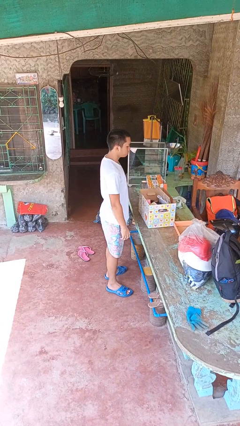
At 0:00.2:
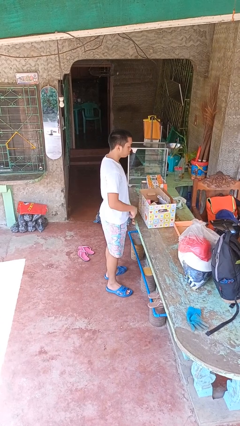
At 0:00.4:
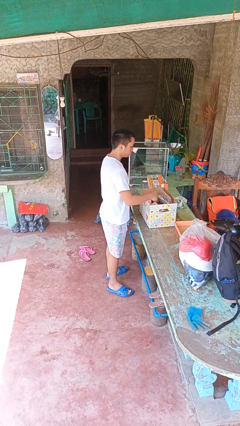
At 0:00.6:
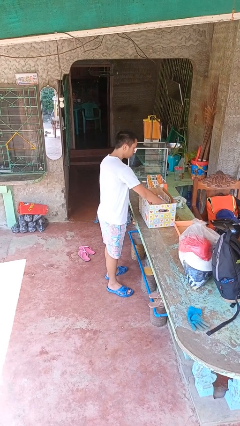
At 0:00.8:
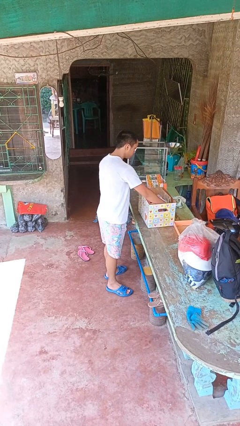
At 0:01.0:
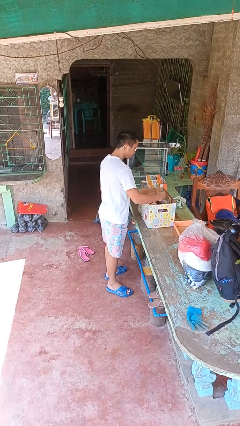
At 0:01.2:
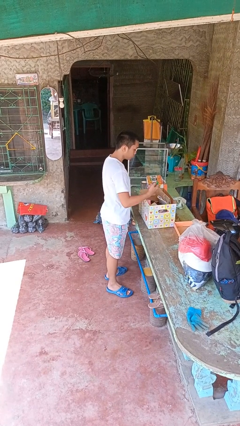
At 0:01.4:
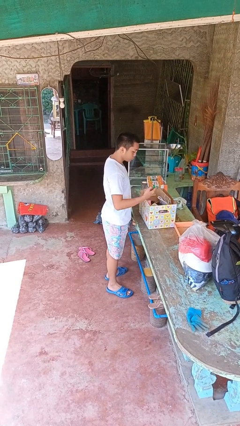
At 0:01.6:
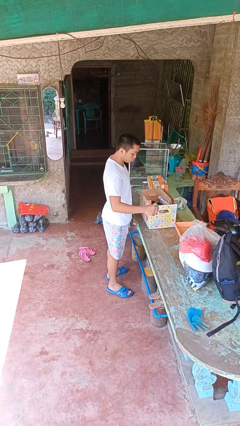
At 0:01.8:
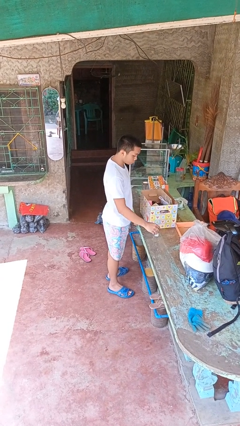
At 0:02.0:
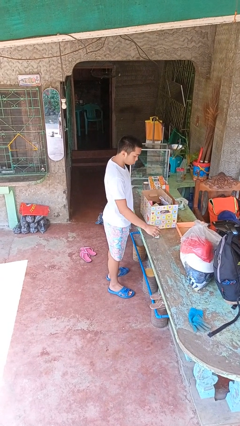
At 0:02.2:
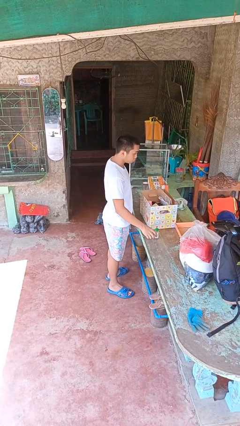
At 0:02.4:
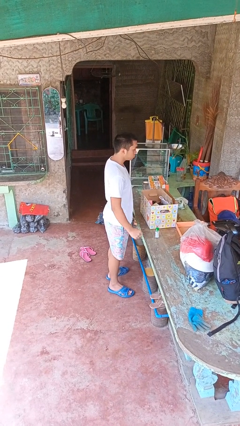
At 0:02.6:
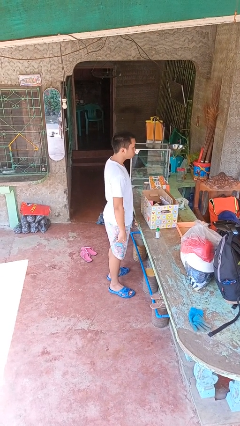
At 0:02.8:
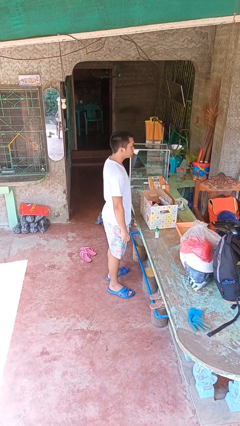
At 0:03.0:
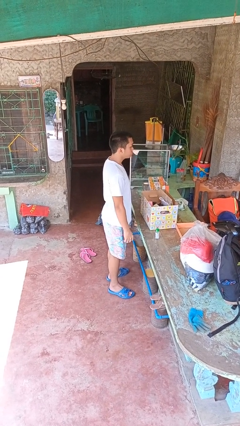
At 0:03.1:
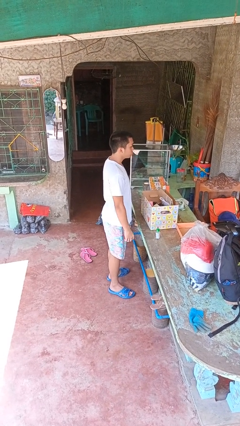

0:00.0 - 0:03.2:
person takes object from box

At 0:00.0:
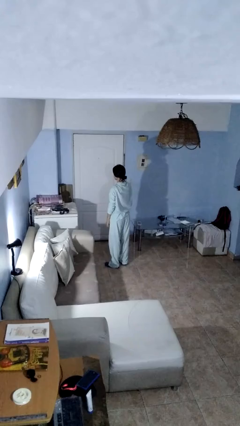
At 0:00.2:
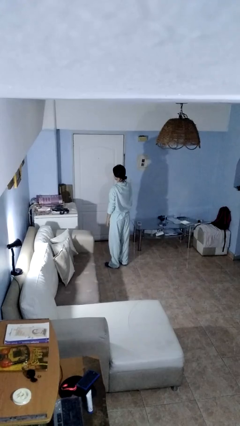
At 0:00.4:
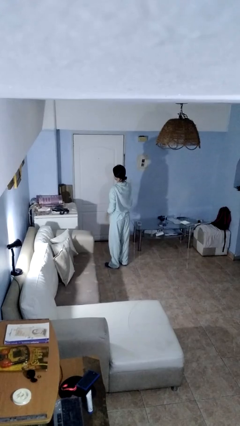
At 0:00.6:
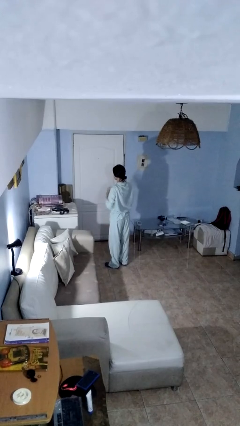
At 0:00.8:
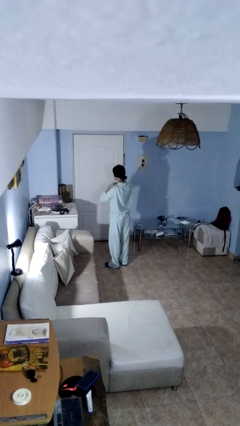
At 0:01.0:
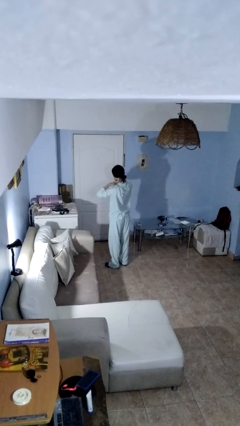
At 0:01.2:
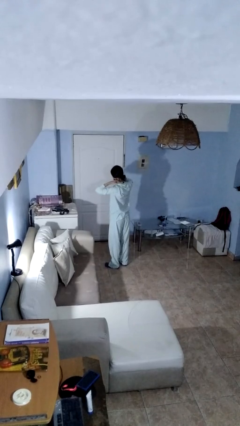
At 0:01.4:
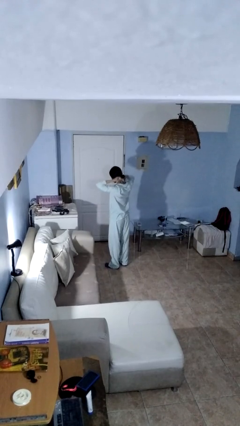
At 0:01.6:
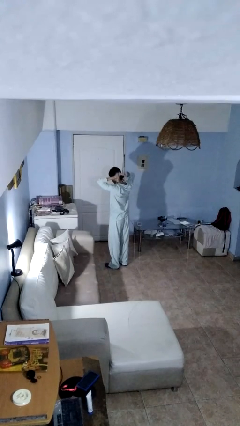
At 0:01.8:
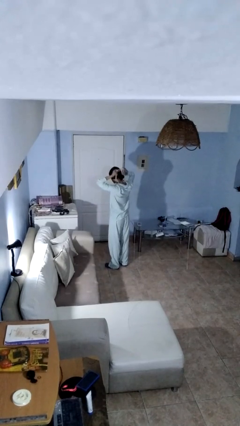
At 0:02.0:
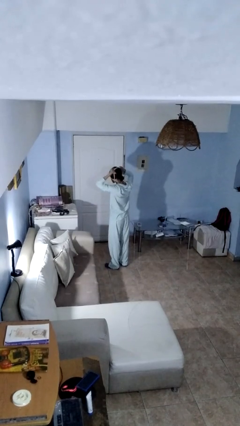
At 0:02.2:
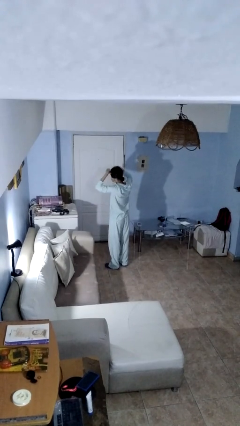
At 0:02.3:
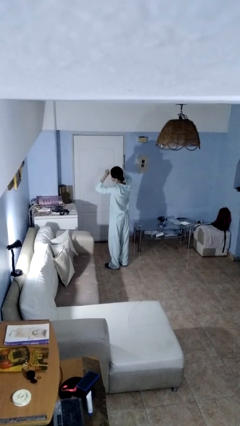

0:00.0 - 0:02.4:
person takes off necklace

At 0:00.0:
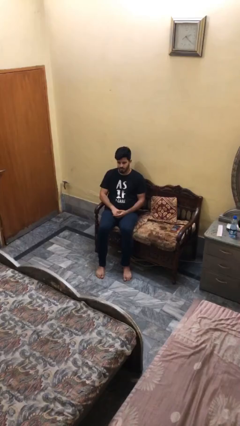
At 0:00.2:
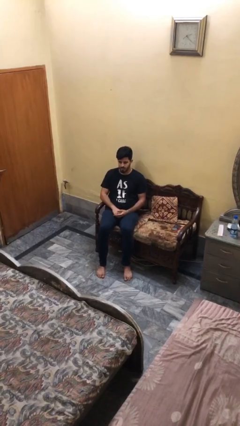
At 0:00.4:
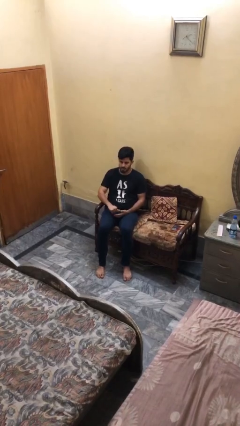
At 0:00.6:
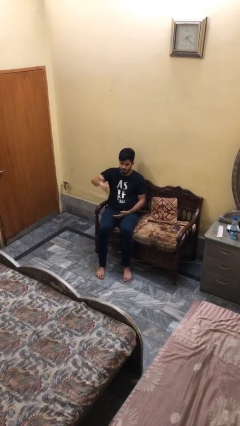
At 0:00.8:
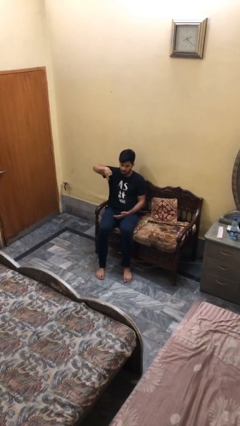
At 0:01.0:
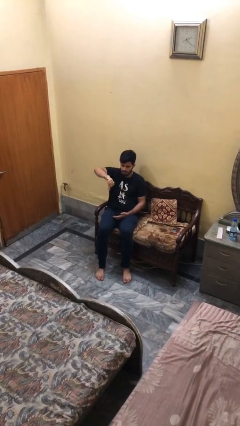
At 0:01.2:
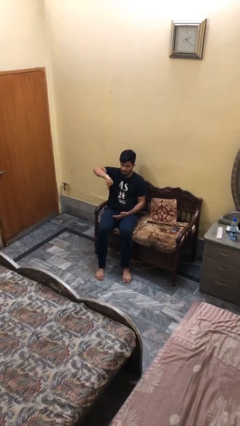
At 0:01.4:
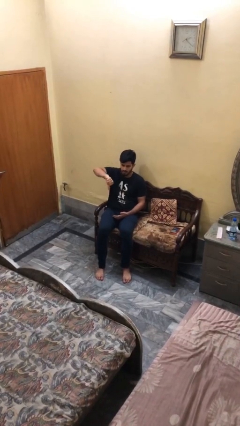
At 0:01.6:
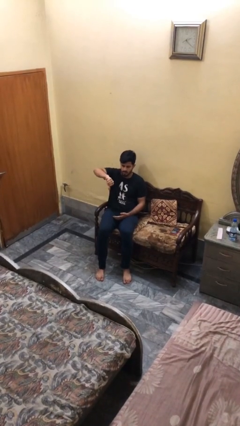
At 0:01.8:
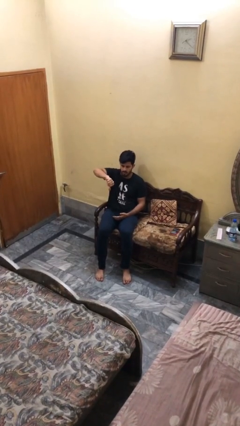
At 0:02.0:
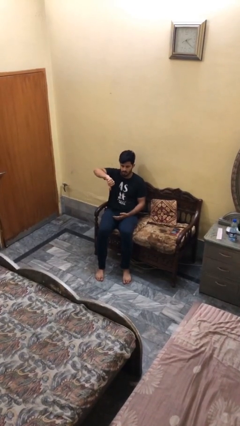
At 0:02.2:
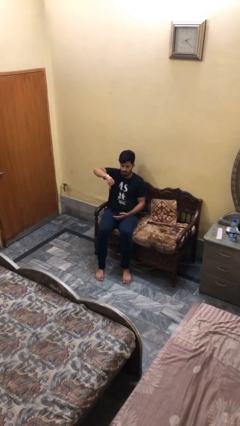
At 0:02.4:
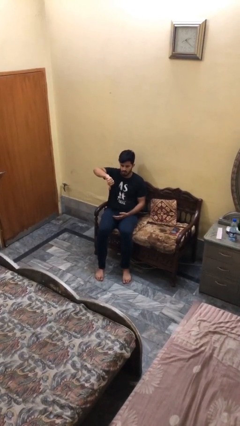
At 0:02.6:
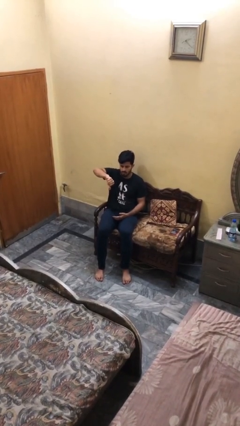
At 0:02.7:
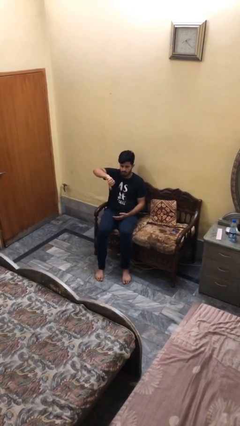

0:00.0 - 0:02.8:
person gestures thumbs down

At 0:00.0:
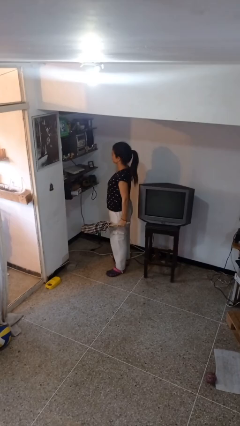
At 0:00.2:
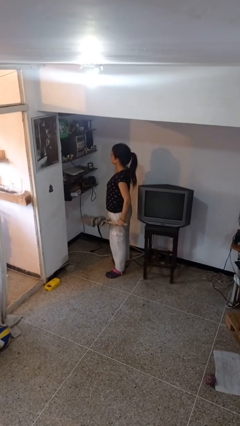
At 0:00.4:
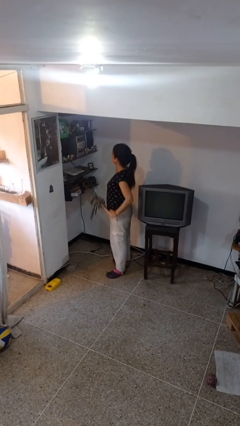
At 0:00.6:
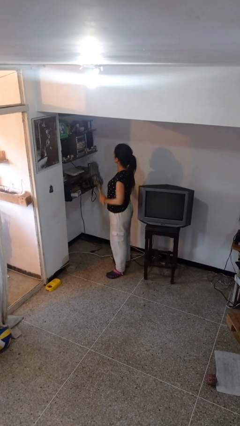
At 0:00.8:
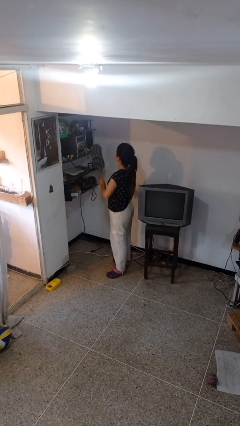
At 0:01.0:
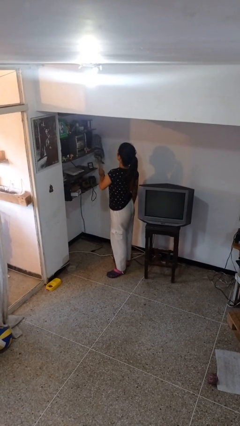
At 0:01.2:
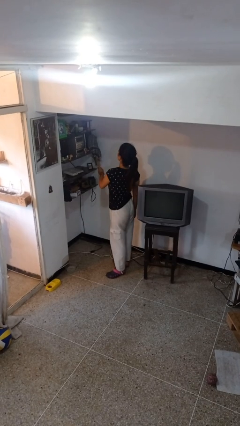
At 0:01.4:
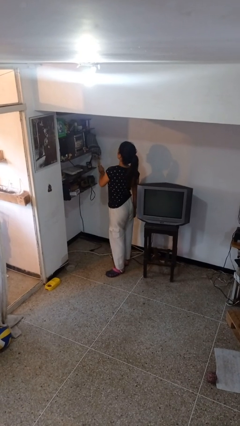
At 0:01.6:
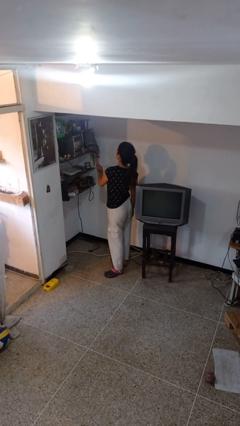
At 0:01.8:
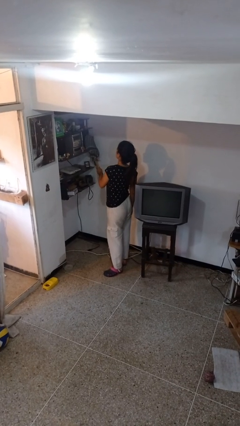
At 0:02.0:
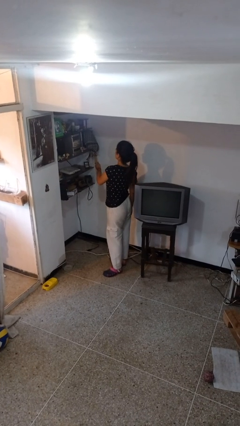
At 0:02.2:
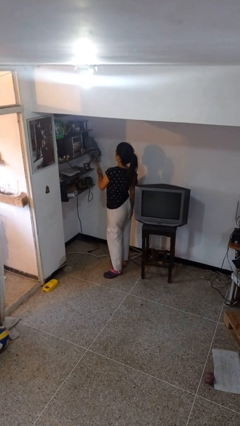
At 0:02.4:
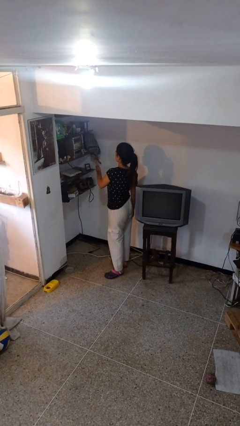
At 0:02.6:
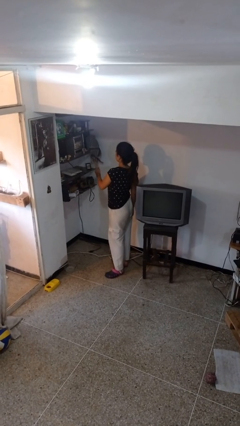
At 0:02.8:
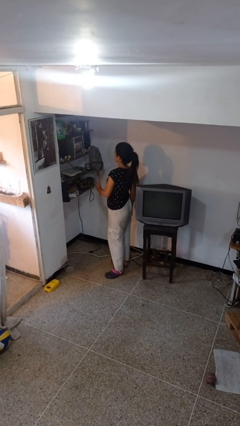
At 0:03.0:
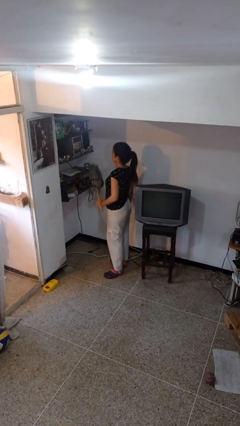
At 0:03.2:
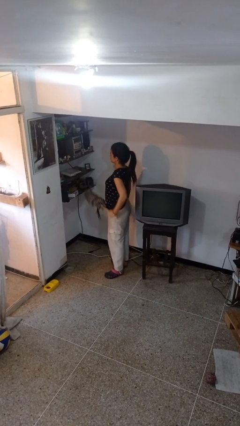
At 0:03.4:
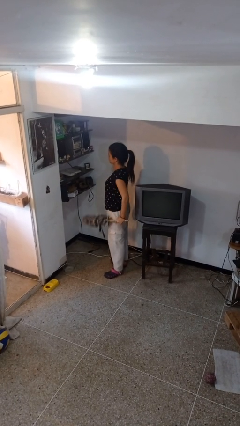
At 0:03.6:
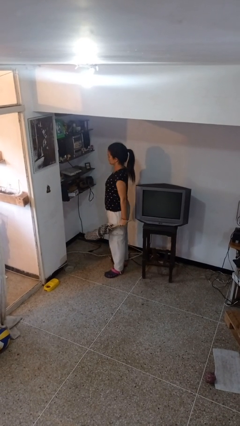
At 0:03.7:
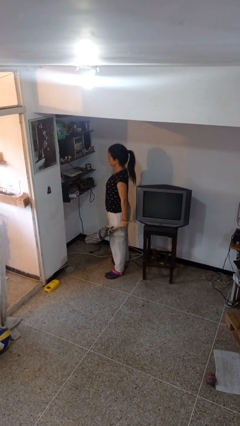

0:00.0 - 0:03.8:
person dusts furniture

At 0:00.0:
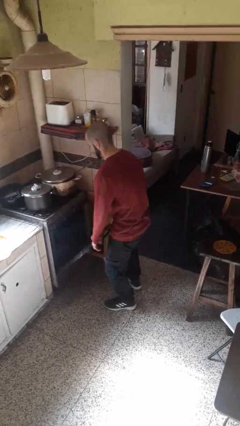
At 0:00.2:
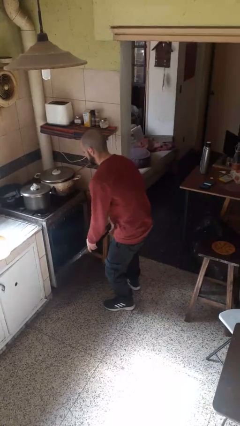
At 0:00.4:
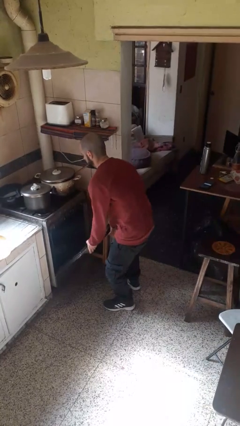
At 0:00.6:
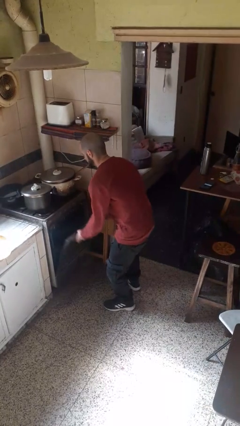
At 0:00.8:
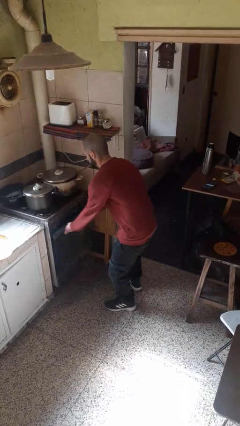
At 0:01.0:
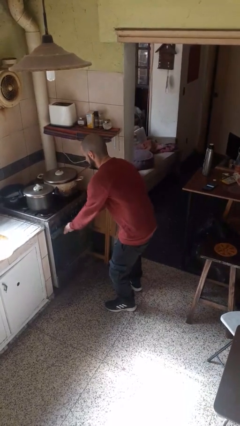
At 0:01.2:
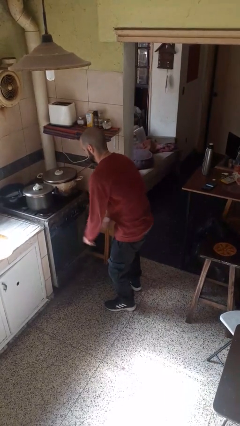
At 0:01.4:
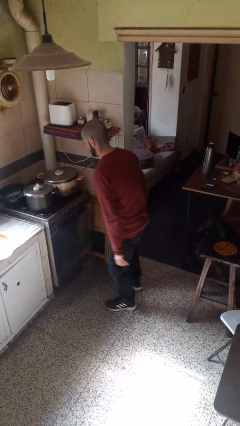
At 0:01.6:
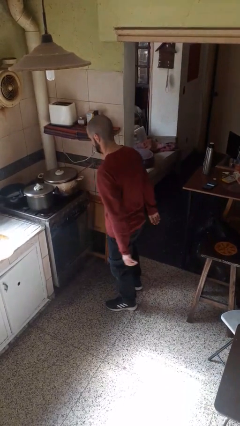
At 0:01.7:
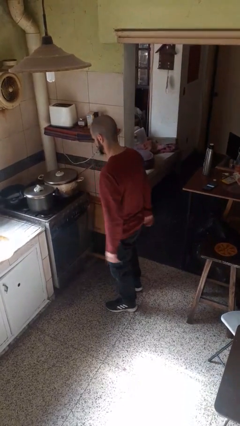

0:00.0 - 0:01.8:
person closes oven door

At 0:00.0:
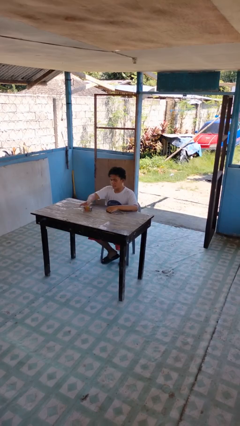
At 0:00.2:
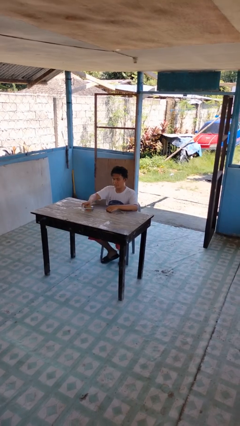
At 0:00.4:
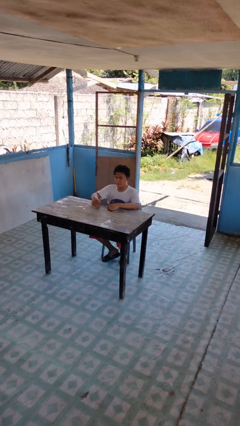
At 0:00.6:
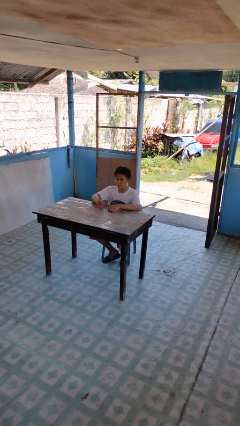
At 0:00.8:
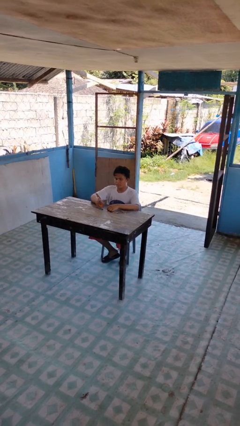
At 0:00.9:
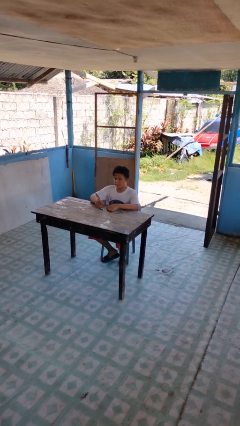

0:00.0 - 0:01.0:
person sets upright glass

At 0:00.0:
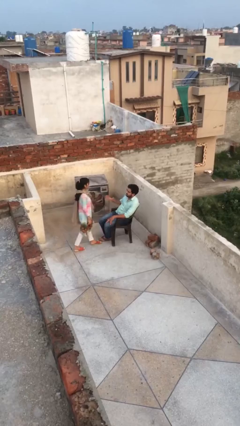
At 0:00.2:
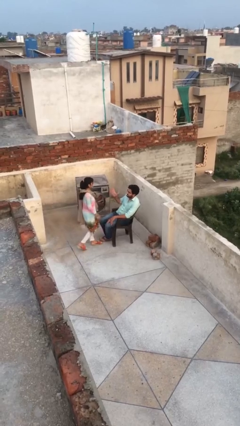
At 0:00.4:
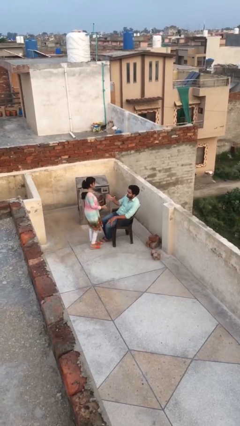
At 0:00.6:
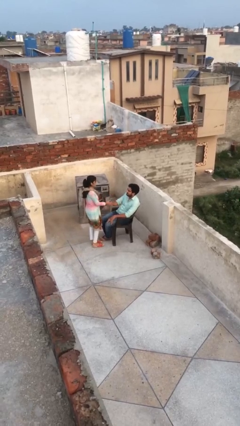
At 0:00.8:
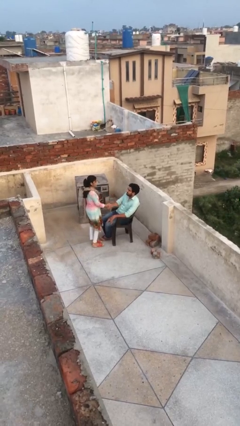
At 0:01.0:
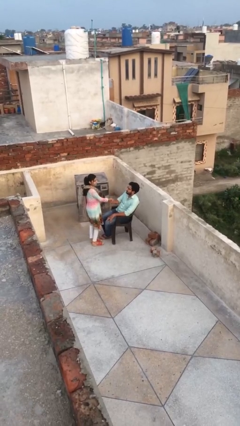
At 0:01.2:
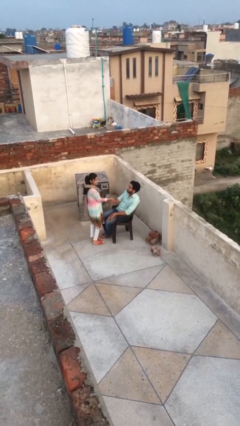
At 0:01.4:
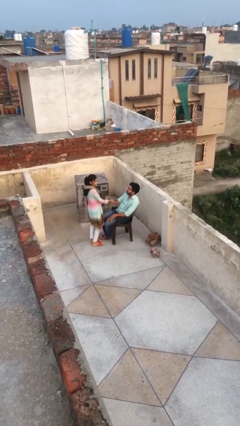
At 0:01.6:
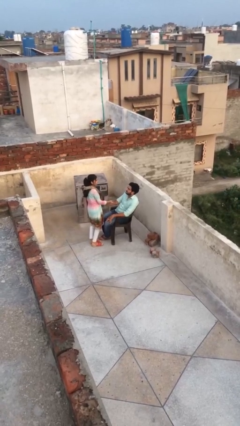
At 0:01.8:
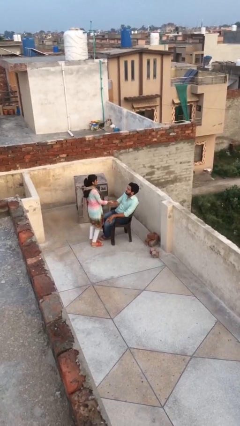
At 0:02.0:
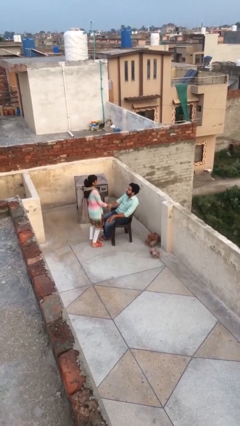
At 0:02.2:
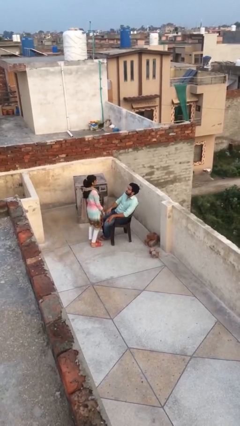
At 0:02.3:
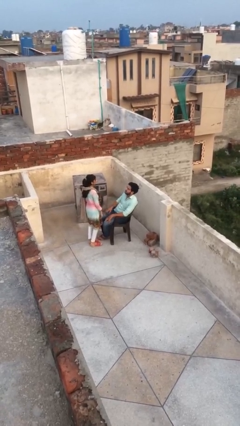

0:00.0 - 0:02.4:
person shakes hand
